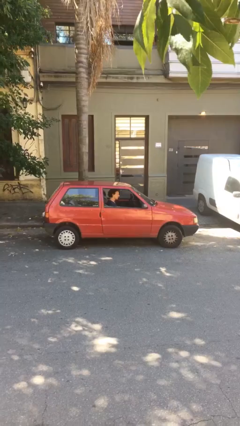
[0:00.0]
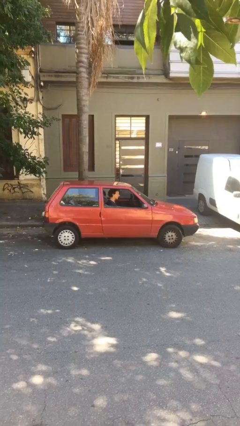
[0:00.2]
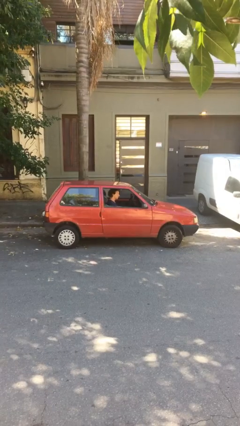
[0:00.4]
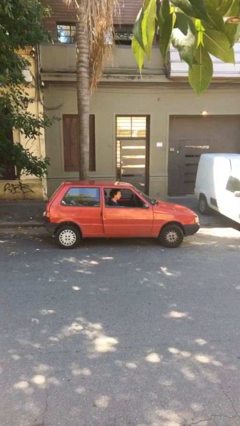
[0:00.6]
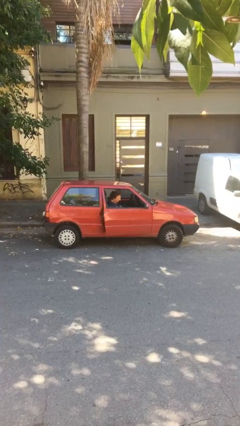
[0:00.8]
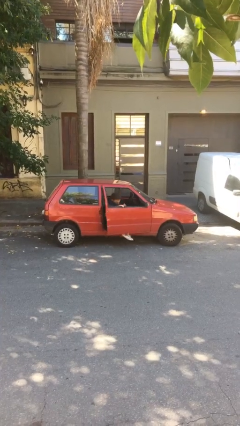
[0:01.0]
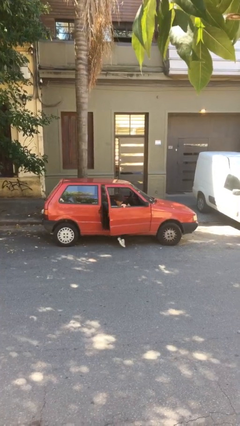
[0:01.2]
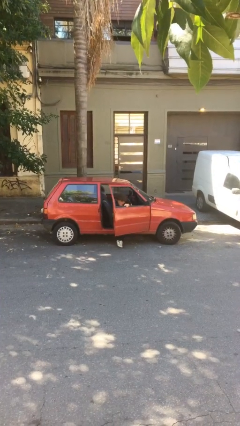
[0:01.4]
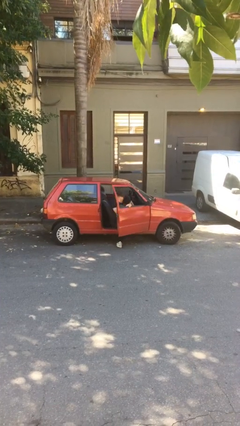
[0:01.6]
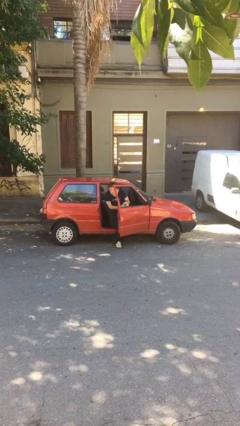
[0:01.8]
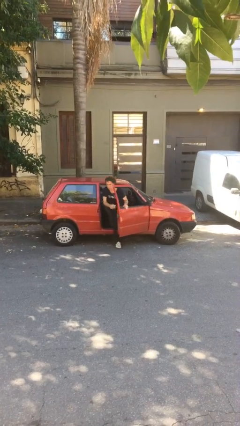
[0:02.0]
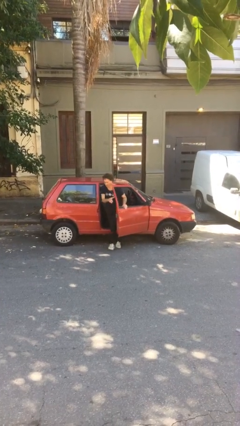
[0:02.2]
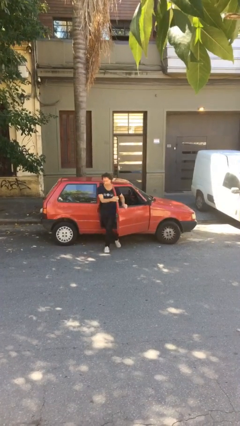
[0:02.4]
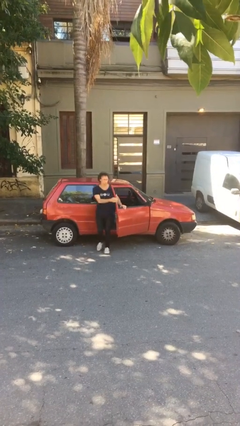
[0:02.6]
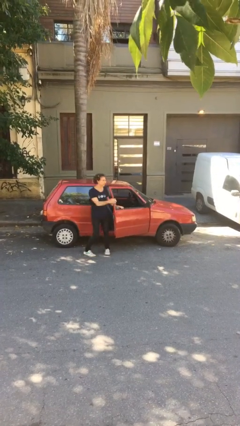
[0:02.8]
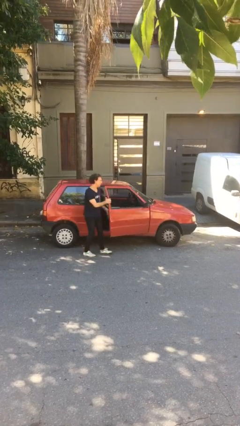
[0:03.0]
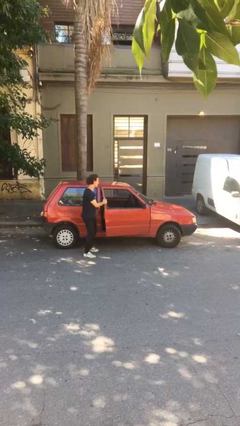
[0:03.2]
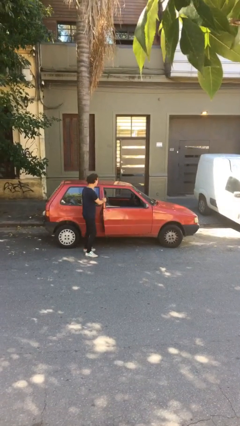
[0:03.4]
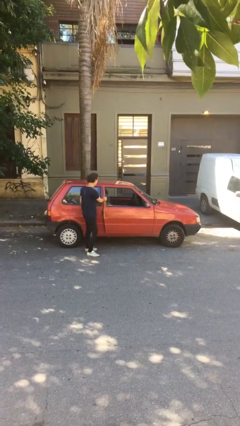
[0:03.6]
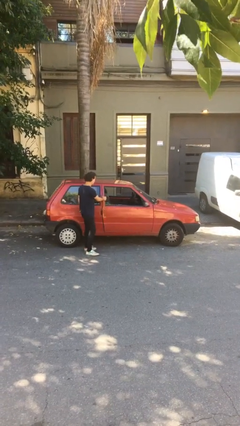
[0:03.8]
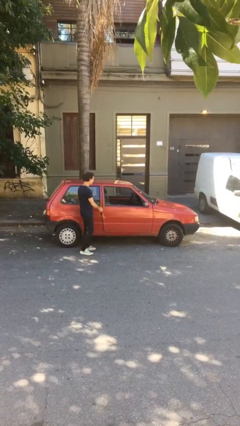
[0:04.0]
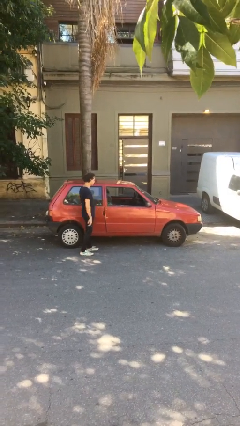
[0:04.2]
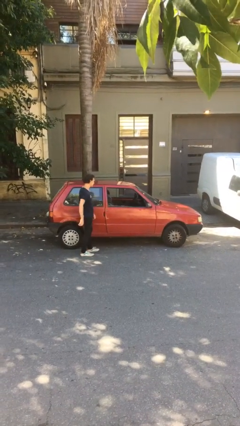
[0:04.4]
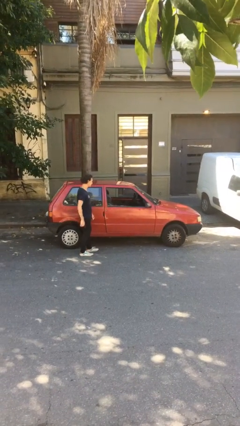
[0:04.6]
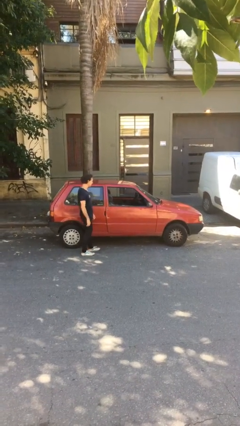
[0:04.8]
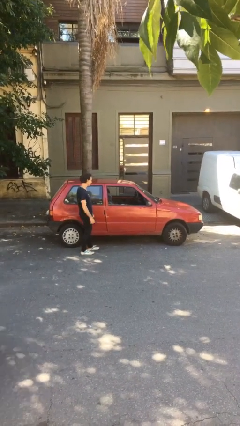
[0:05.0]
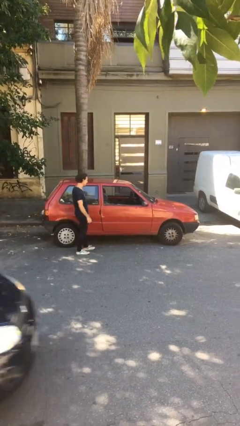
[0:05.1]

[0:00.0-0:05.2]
car drops off person

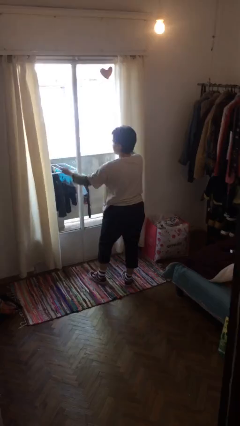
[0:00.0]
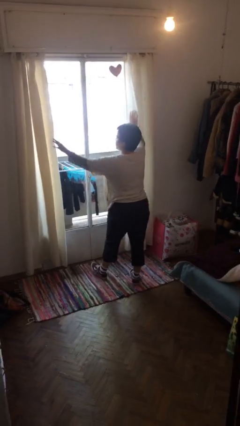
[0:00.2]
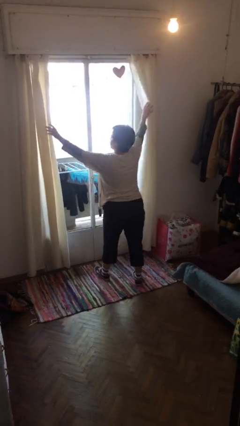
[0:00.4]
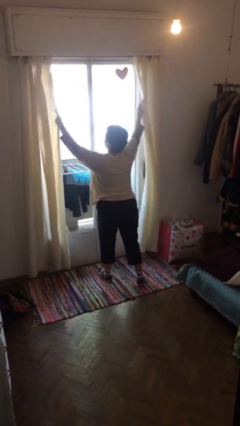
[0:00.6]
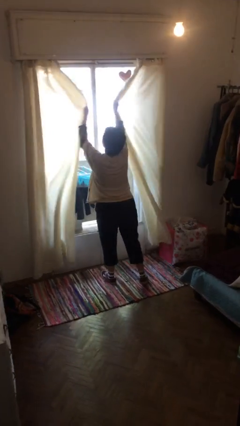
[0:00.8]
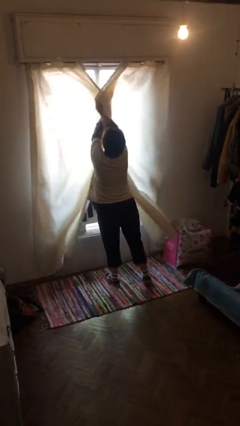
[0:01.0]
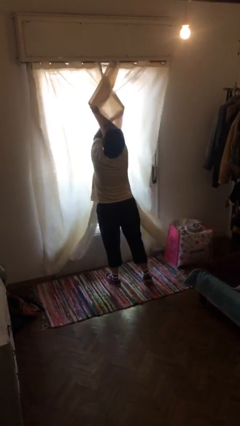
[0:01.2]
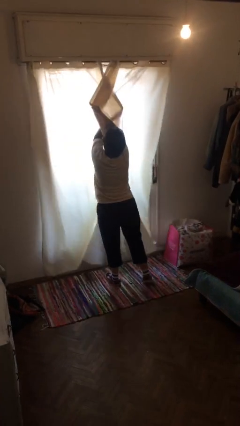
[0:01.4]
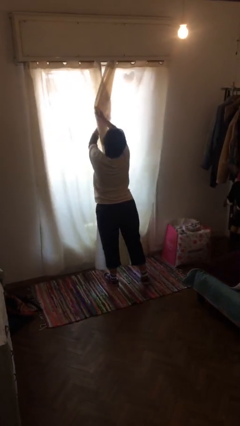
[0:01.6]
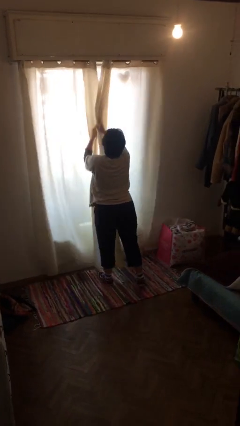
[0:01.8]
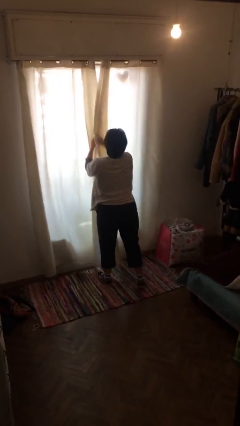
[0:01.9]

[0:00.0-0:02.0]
person closes curtains

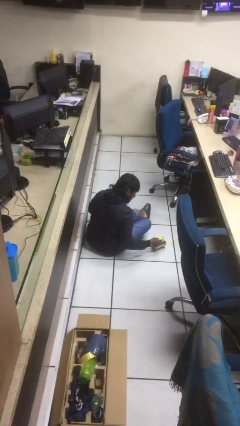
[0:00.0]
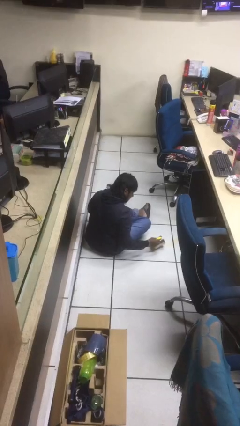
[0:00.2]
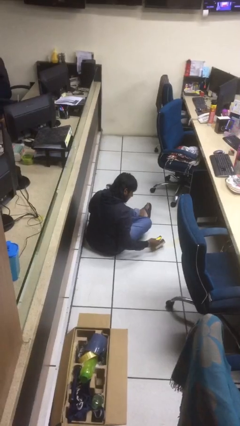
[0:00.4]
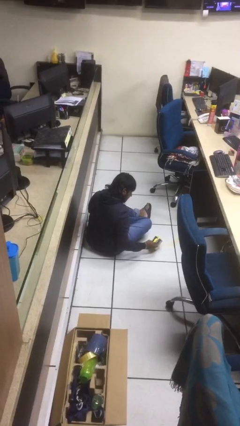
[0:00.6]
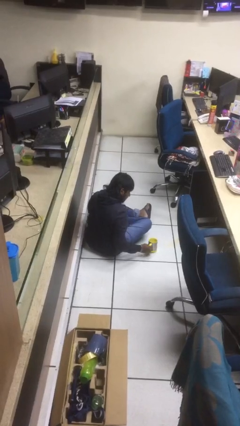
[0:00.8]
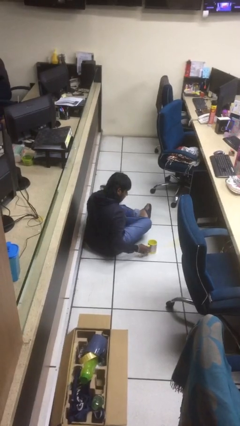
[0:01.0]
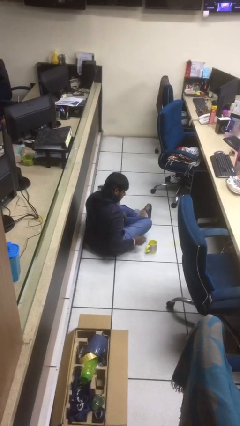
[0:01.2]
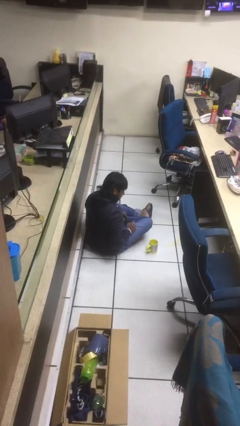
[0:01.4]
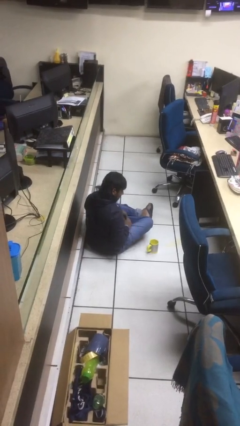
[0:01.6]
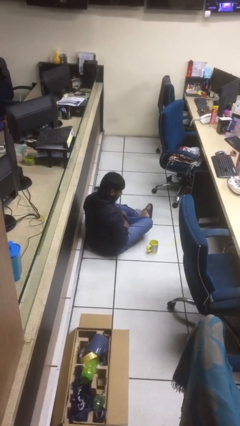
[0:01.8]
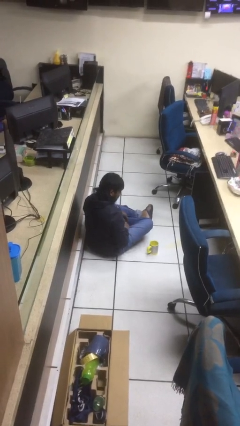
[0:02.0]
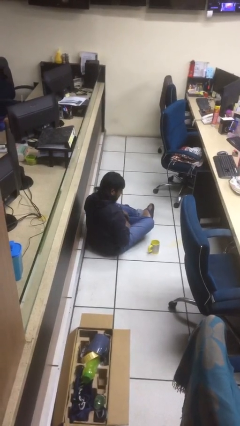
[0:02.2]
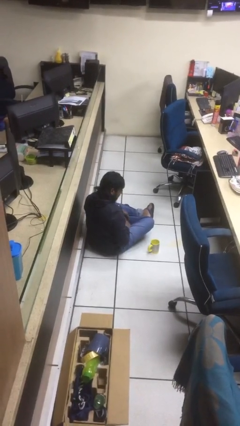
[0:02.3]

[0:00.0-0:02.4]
person sets upright glass

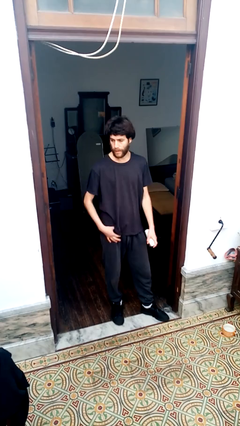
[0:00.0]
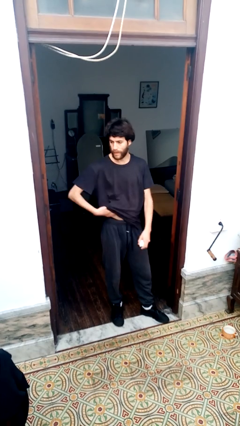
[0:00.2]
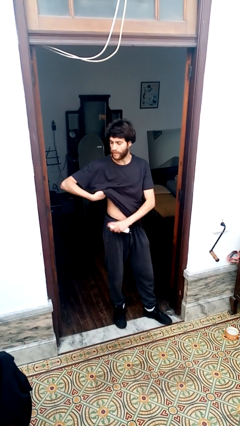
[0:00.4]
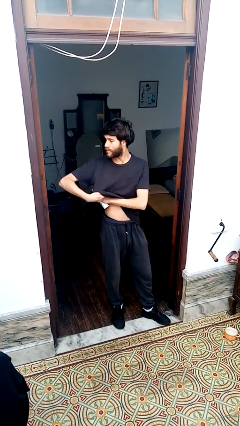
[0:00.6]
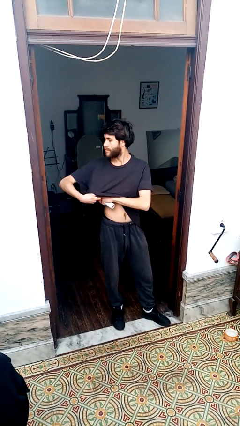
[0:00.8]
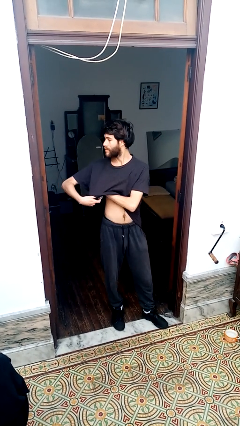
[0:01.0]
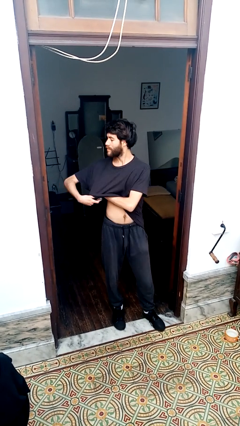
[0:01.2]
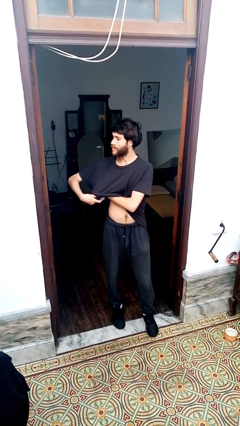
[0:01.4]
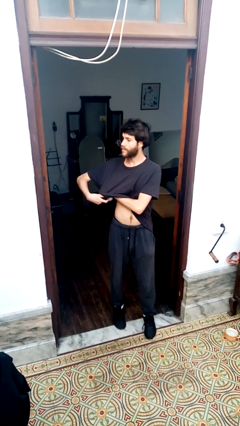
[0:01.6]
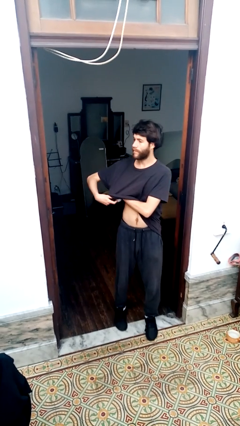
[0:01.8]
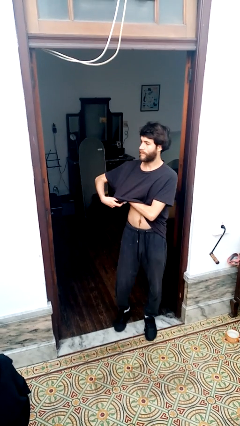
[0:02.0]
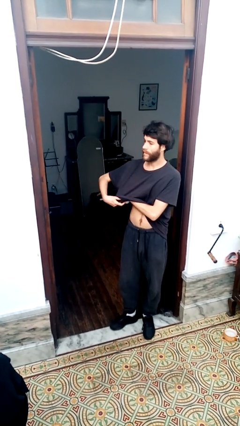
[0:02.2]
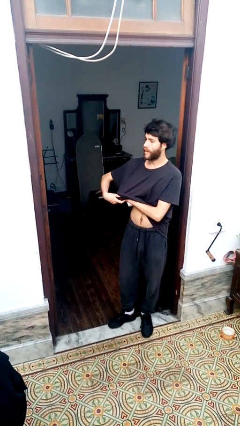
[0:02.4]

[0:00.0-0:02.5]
person applies deodorant

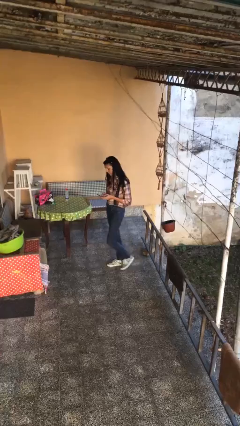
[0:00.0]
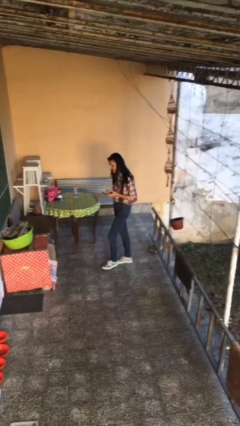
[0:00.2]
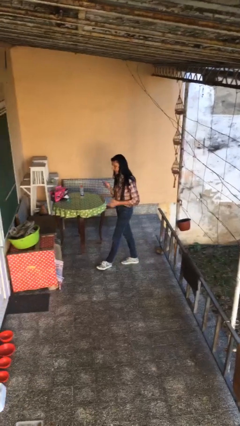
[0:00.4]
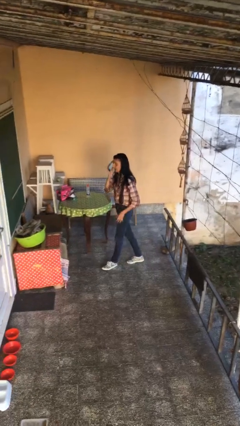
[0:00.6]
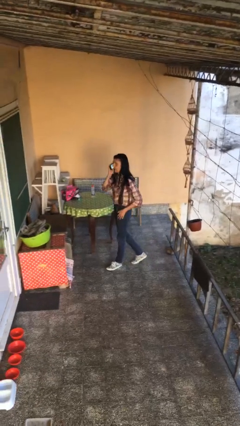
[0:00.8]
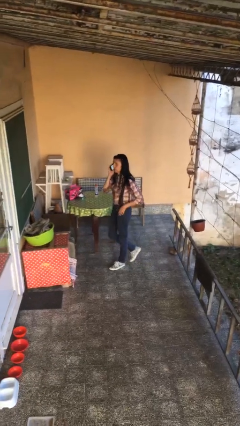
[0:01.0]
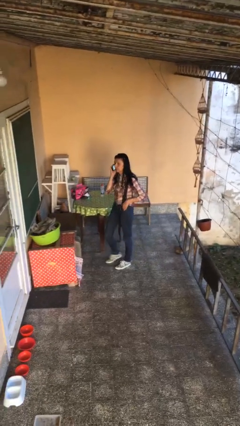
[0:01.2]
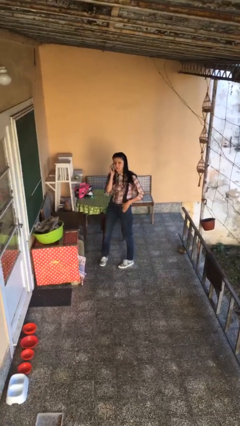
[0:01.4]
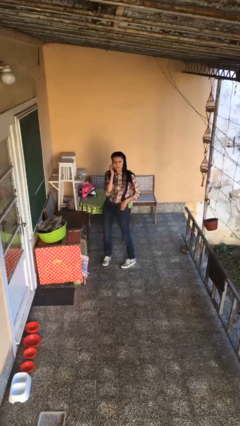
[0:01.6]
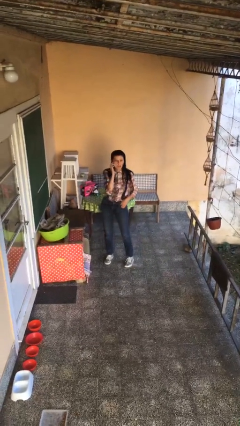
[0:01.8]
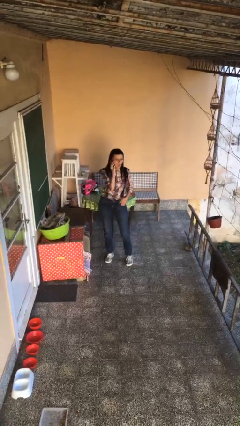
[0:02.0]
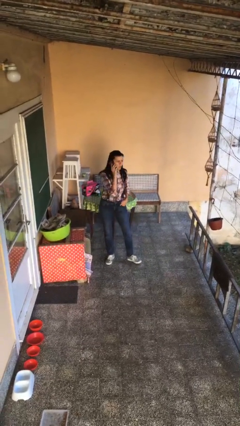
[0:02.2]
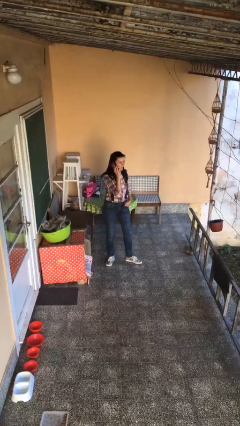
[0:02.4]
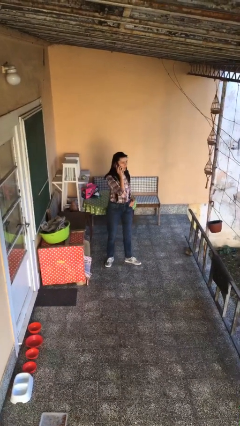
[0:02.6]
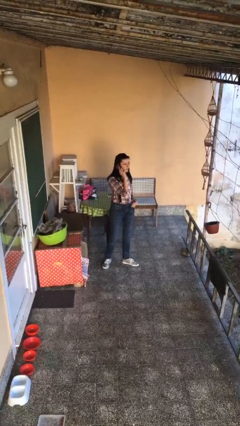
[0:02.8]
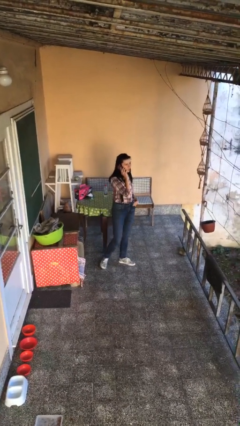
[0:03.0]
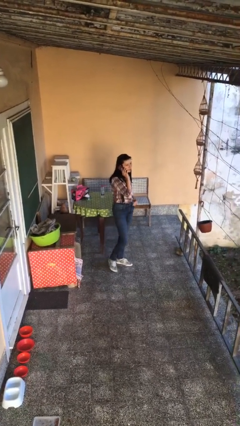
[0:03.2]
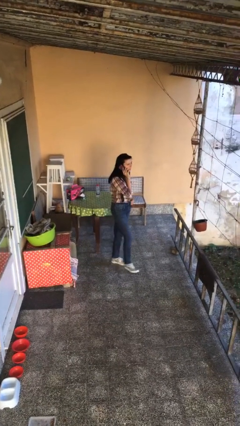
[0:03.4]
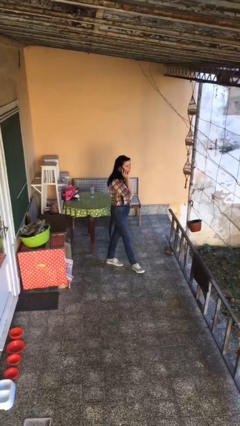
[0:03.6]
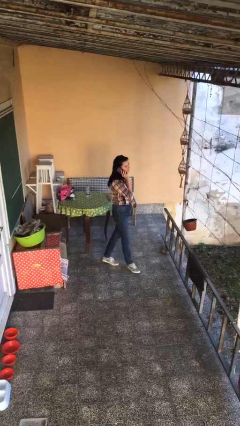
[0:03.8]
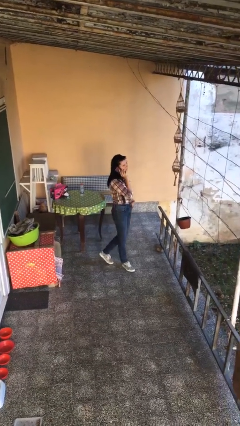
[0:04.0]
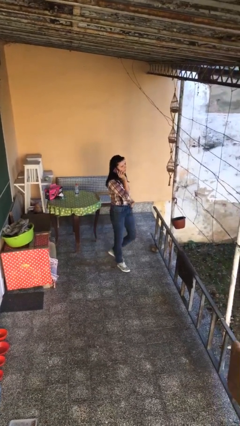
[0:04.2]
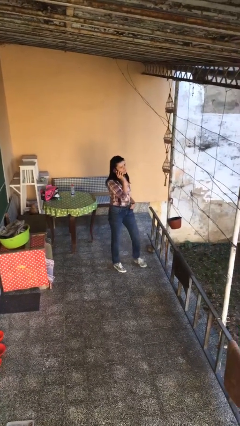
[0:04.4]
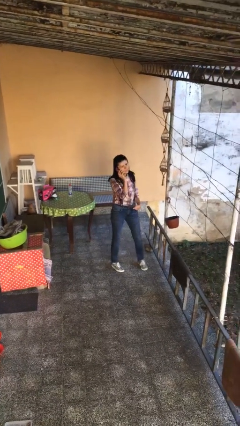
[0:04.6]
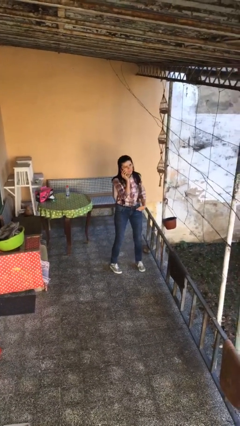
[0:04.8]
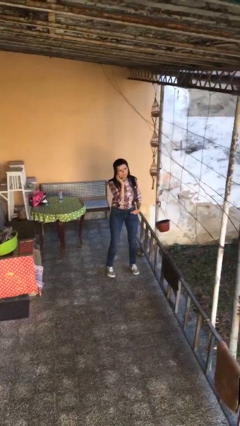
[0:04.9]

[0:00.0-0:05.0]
person talks on phone

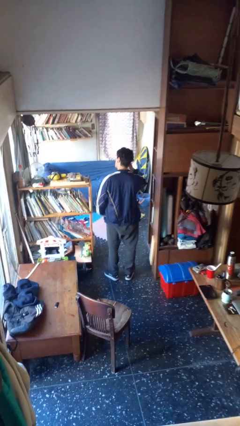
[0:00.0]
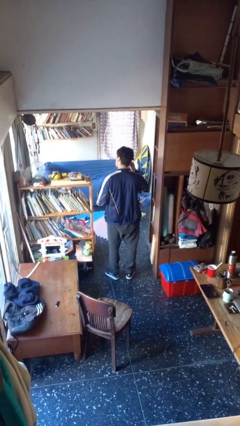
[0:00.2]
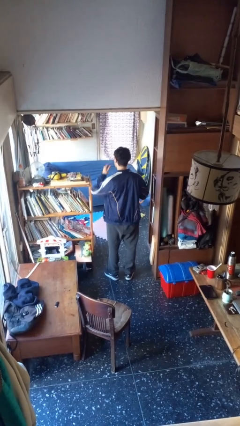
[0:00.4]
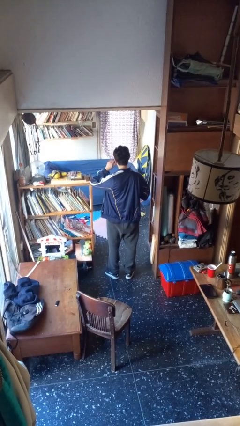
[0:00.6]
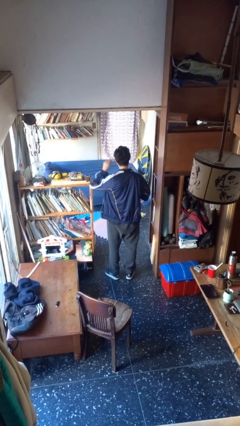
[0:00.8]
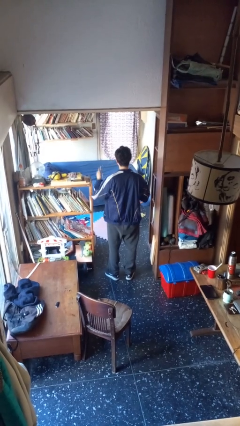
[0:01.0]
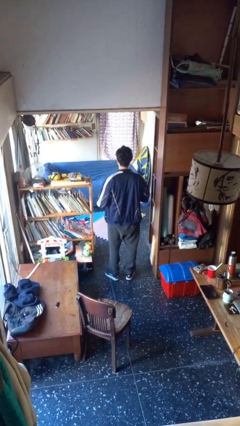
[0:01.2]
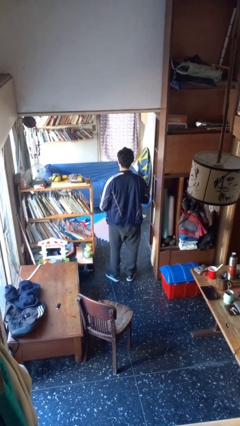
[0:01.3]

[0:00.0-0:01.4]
person takes off headphones
